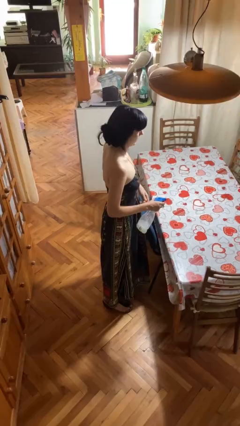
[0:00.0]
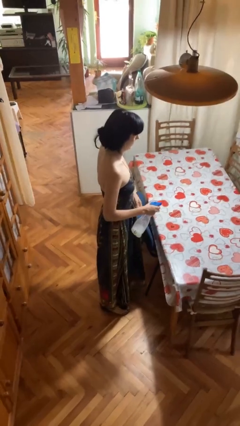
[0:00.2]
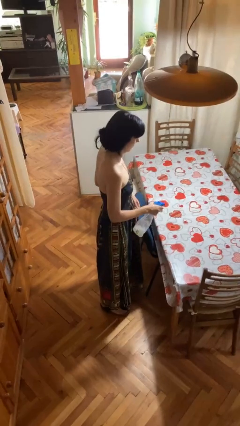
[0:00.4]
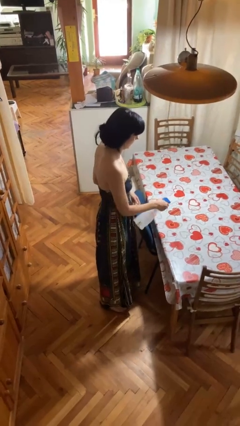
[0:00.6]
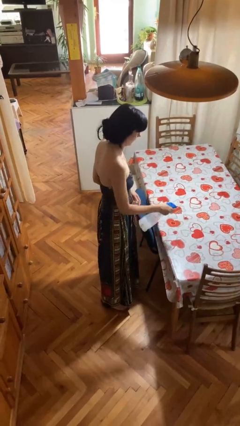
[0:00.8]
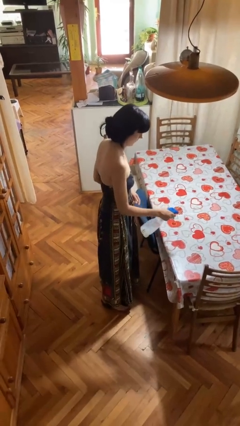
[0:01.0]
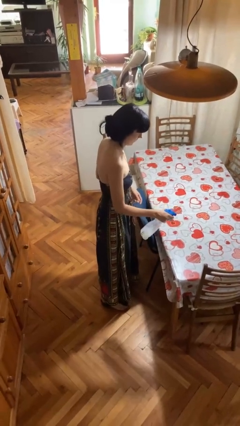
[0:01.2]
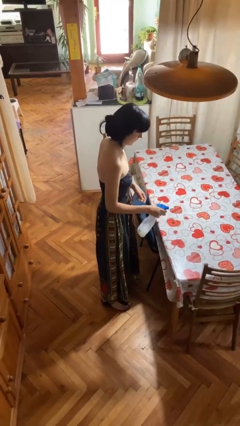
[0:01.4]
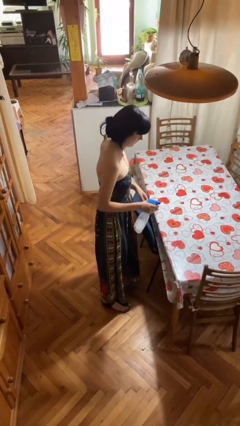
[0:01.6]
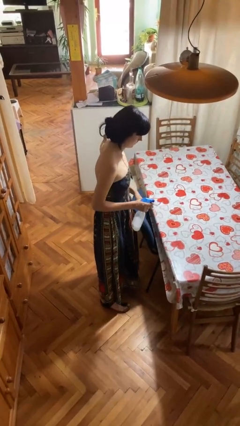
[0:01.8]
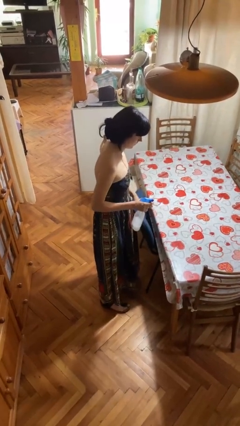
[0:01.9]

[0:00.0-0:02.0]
person sprays from bottle

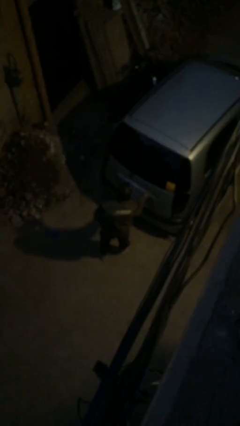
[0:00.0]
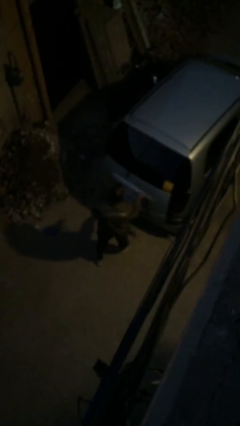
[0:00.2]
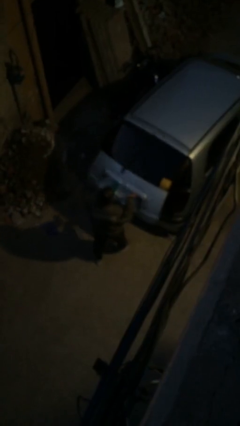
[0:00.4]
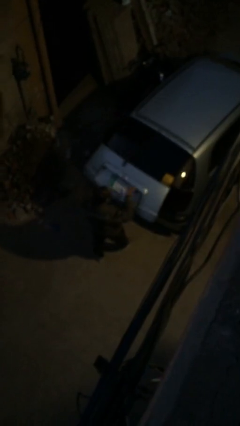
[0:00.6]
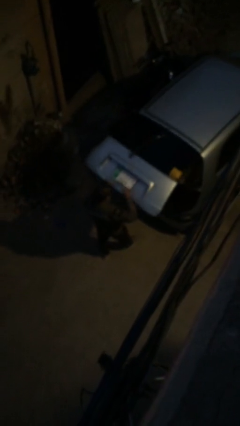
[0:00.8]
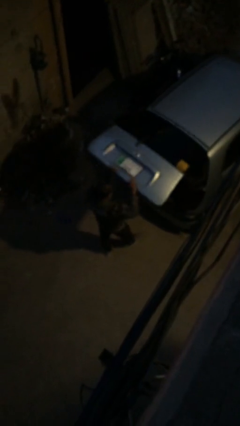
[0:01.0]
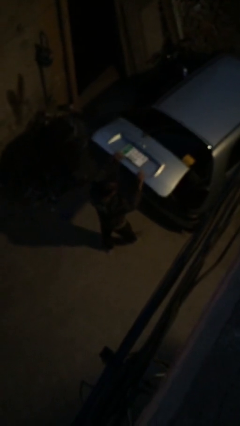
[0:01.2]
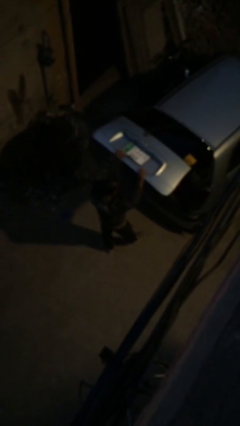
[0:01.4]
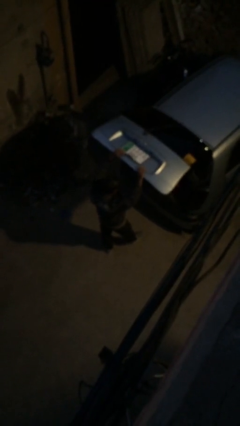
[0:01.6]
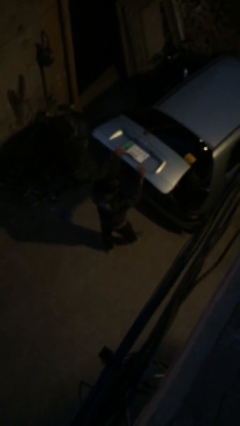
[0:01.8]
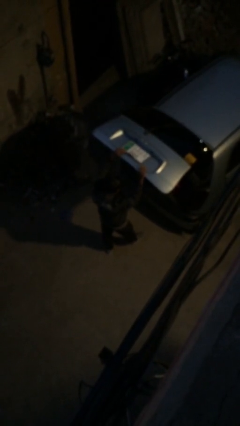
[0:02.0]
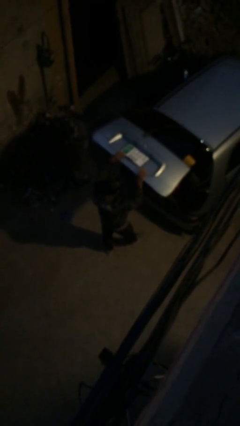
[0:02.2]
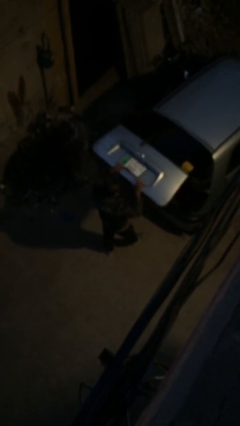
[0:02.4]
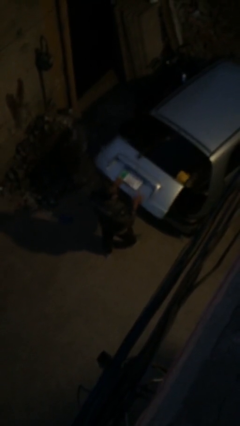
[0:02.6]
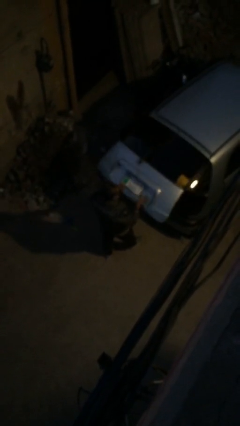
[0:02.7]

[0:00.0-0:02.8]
person opens car trunk

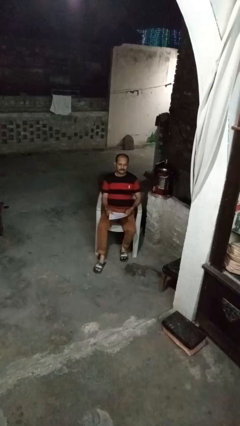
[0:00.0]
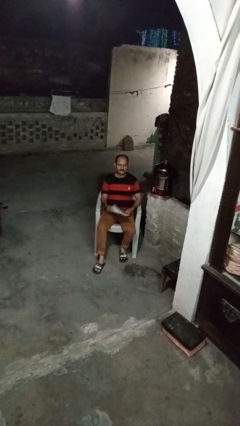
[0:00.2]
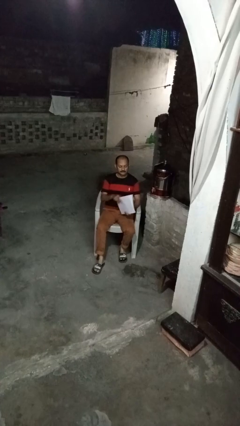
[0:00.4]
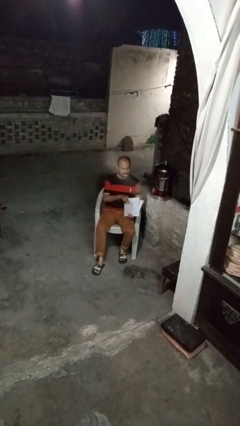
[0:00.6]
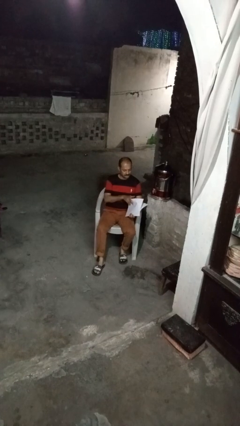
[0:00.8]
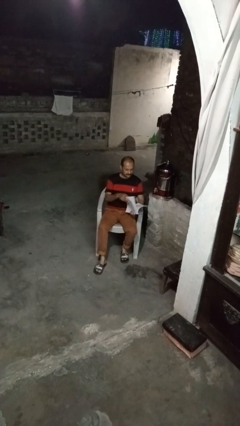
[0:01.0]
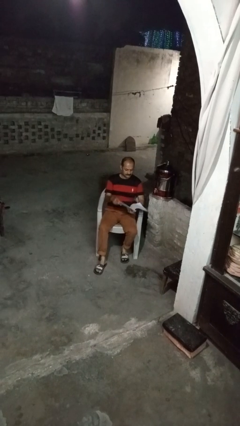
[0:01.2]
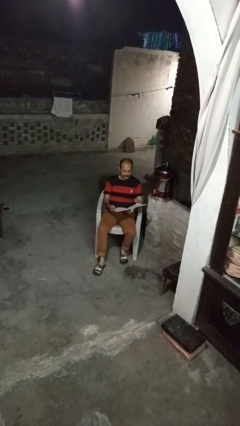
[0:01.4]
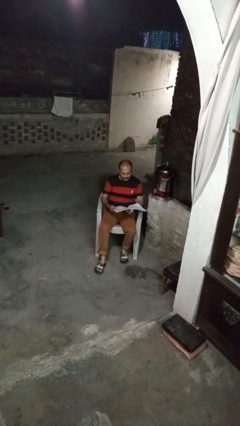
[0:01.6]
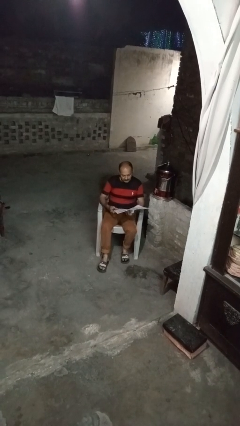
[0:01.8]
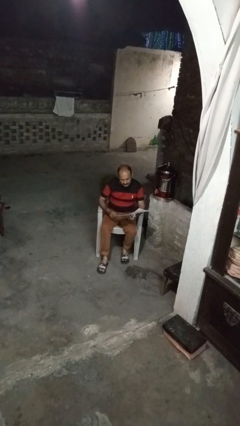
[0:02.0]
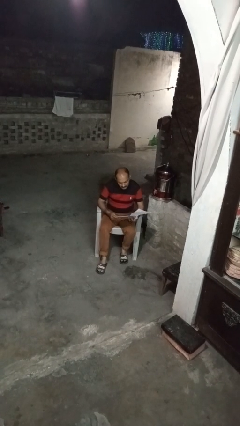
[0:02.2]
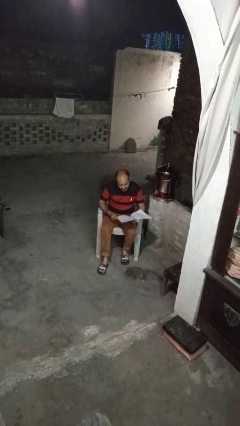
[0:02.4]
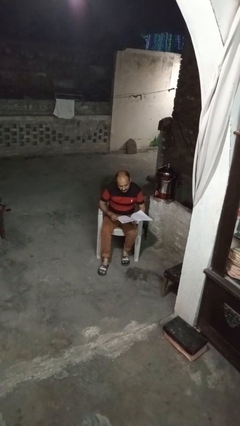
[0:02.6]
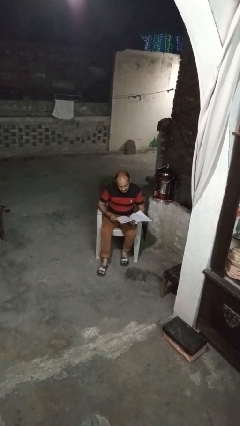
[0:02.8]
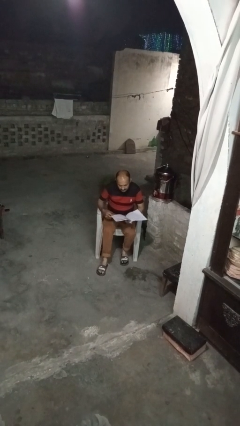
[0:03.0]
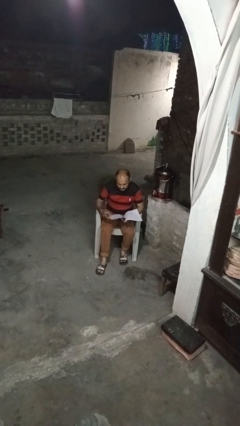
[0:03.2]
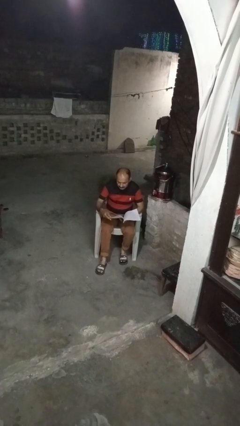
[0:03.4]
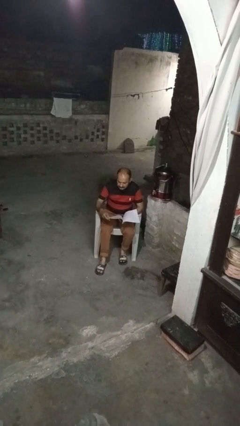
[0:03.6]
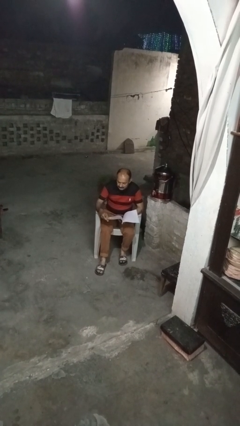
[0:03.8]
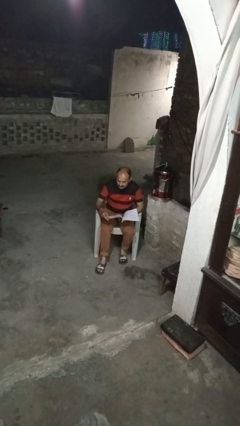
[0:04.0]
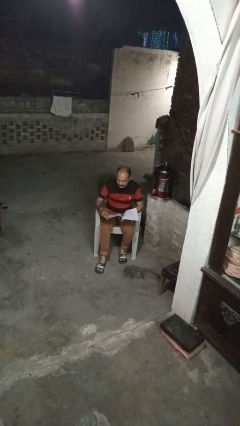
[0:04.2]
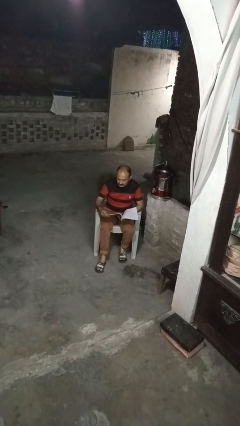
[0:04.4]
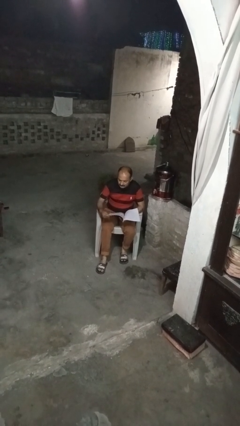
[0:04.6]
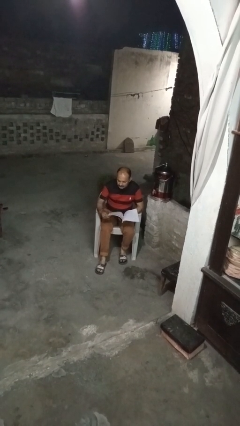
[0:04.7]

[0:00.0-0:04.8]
person reads magazine

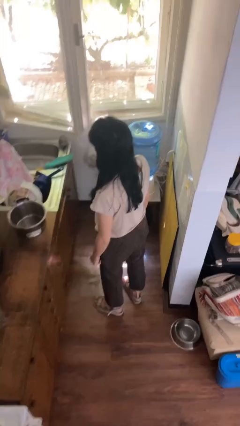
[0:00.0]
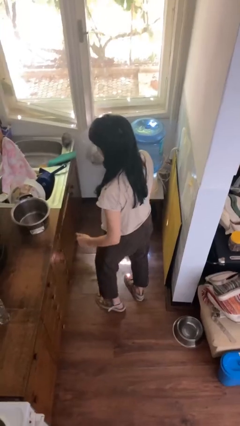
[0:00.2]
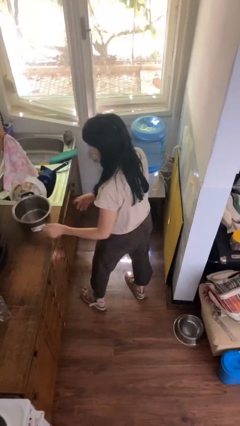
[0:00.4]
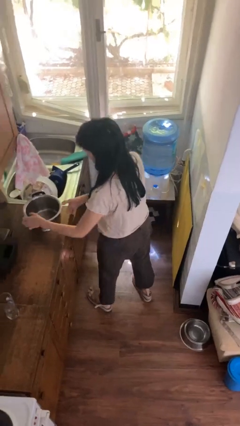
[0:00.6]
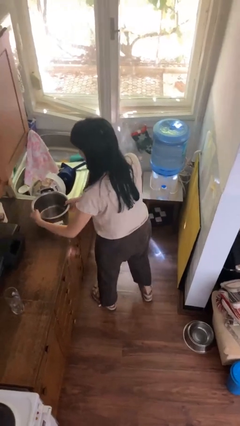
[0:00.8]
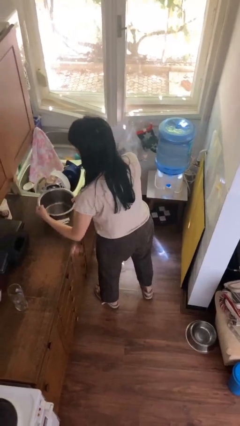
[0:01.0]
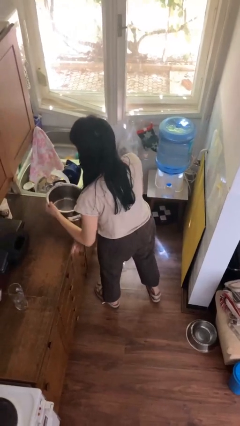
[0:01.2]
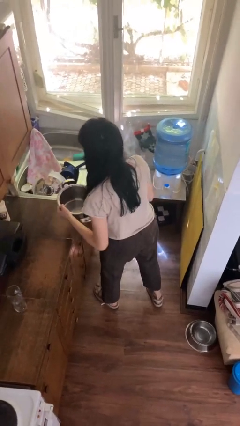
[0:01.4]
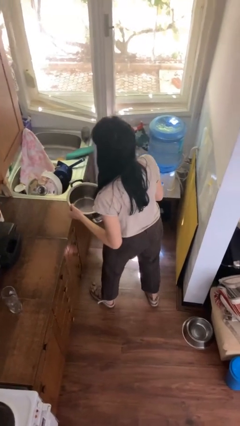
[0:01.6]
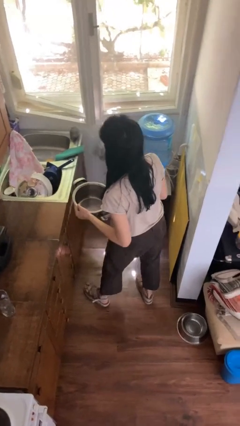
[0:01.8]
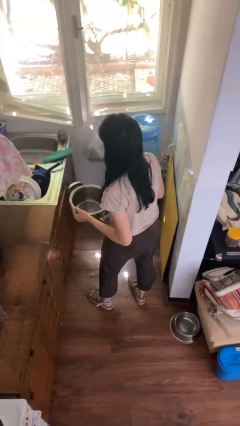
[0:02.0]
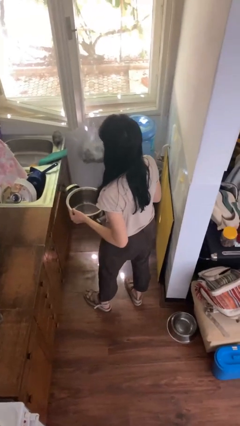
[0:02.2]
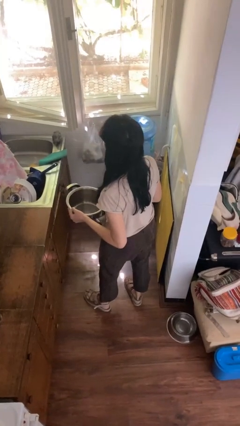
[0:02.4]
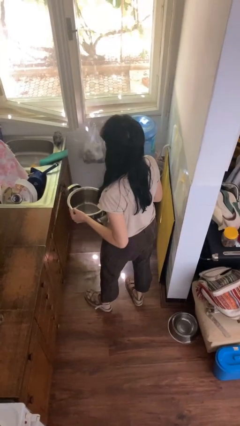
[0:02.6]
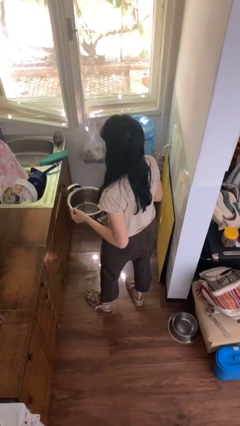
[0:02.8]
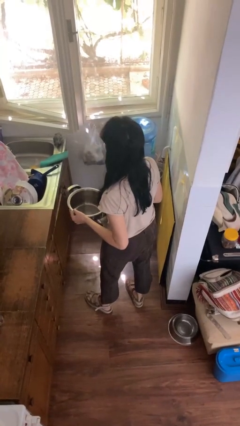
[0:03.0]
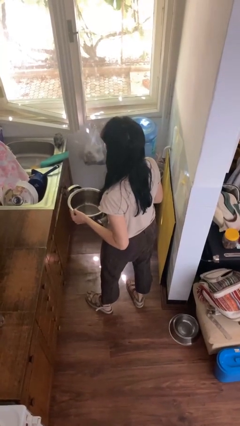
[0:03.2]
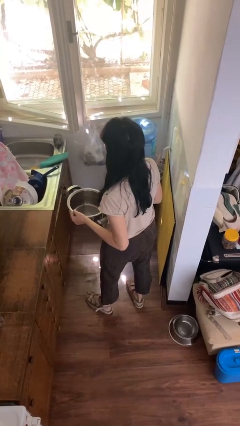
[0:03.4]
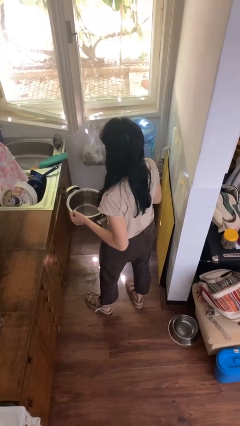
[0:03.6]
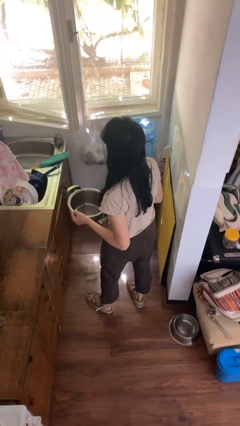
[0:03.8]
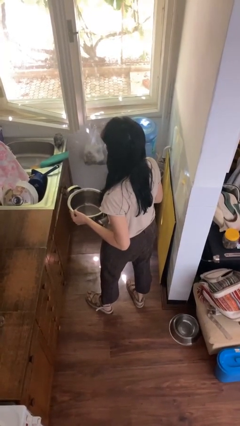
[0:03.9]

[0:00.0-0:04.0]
person picks up object from countertop

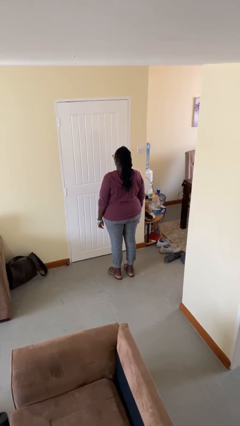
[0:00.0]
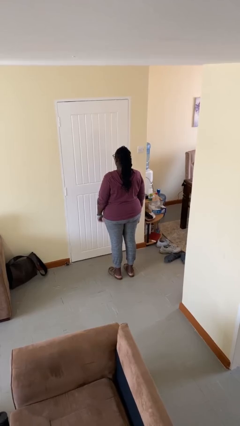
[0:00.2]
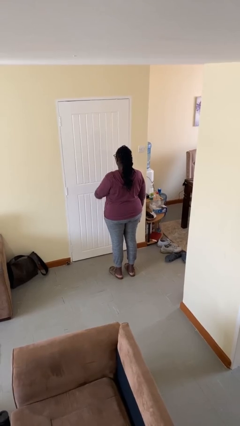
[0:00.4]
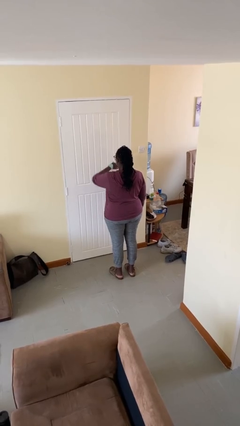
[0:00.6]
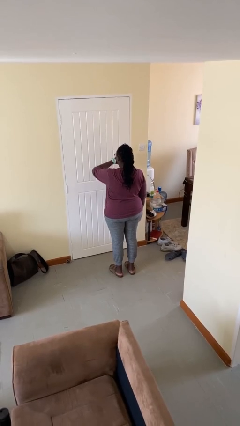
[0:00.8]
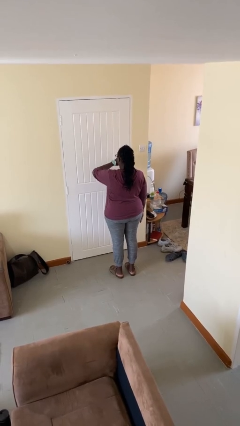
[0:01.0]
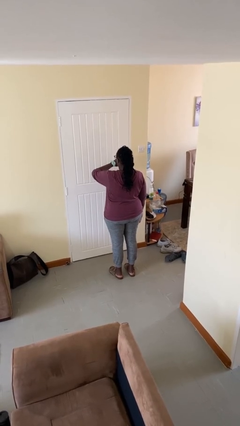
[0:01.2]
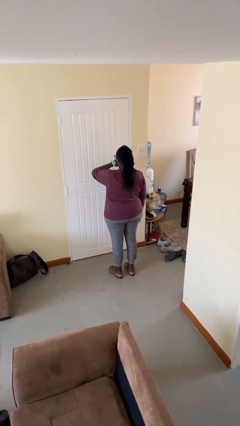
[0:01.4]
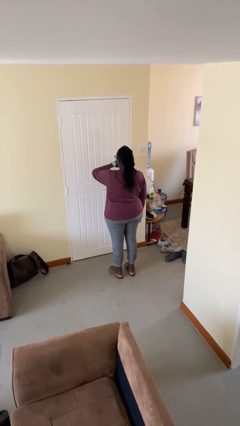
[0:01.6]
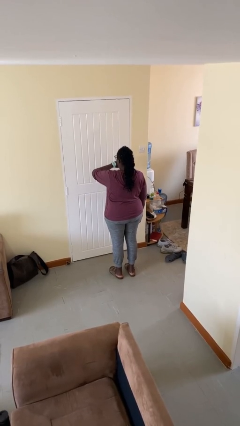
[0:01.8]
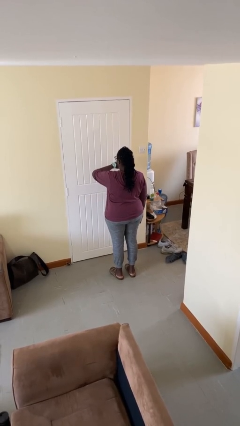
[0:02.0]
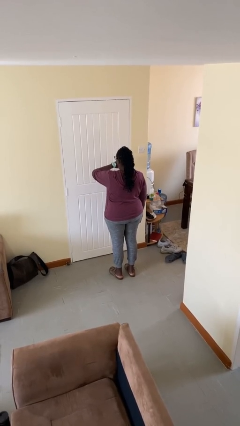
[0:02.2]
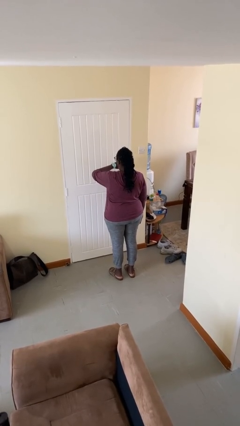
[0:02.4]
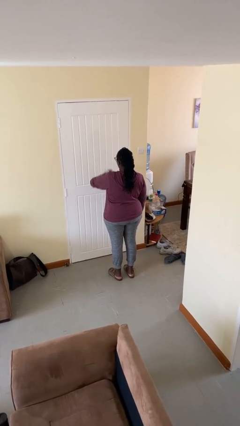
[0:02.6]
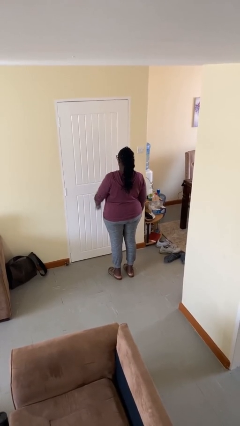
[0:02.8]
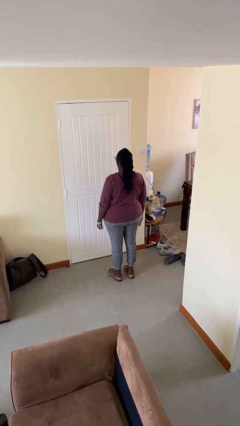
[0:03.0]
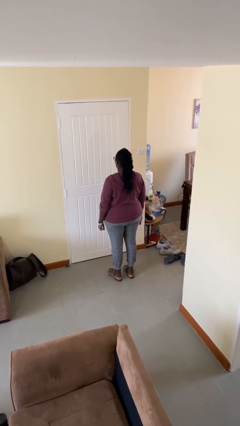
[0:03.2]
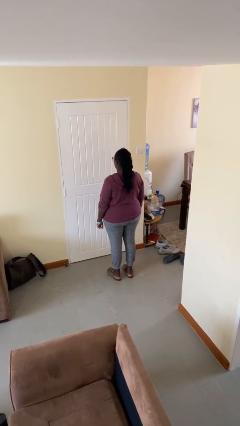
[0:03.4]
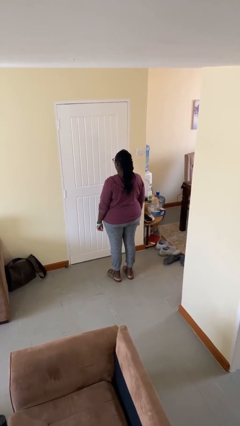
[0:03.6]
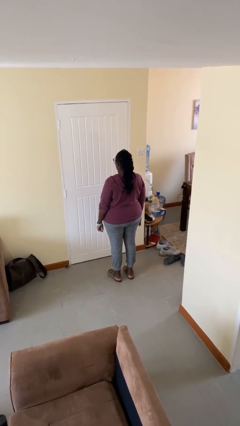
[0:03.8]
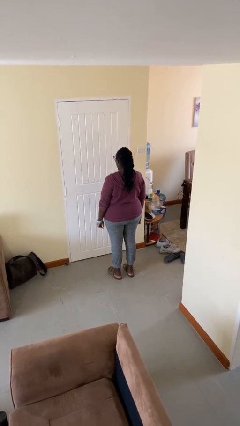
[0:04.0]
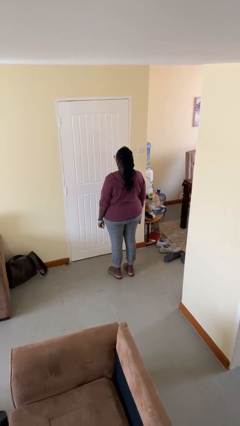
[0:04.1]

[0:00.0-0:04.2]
person looks at wristwatch

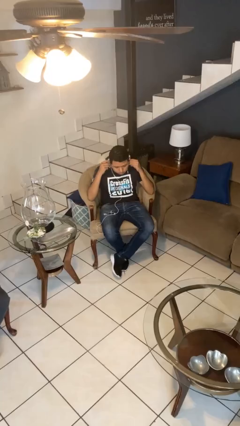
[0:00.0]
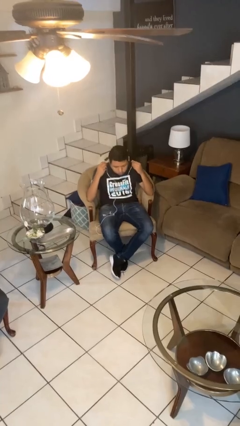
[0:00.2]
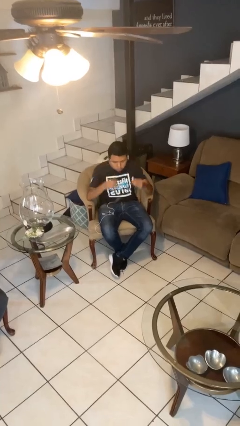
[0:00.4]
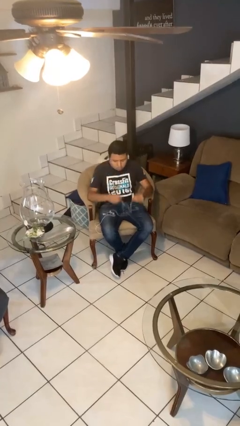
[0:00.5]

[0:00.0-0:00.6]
person takes off headphones
